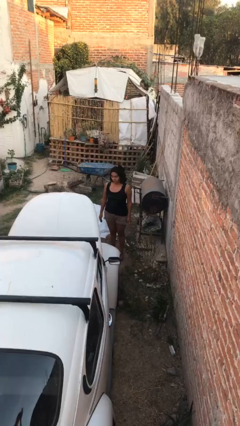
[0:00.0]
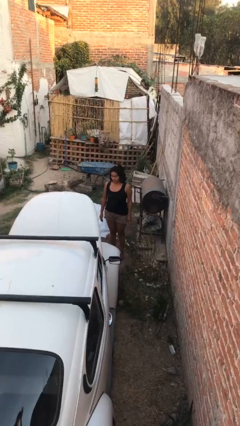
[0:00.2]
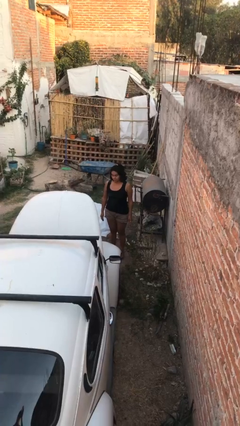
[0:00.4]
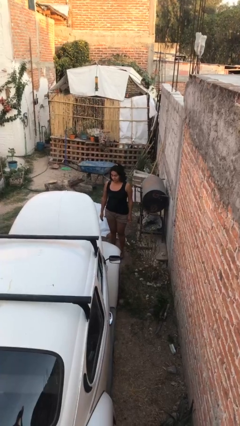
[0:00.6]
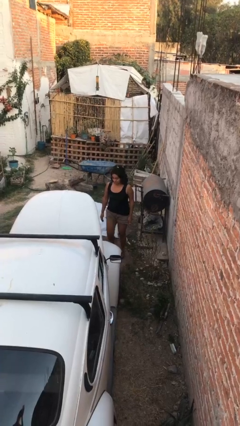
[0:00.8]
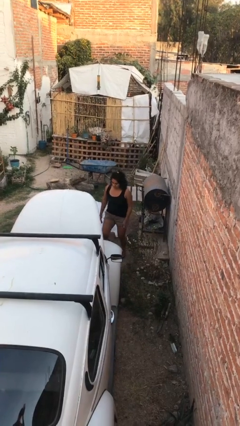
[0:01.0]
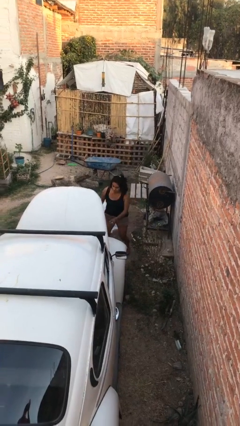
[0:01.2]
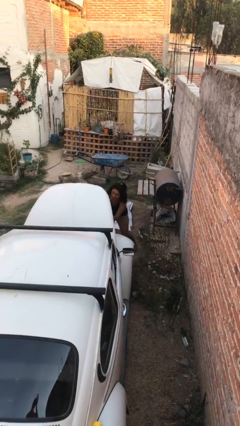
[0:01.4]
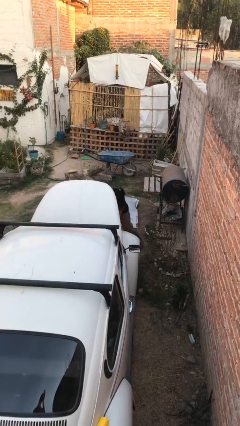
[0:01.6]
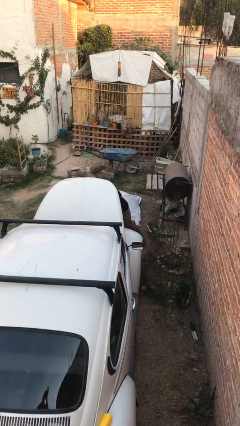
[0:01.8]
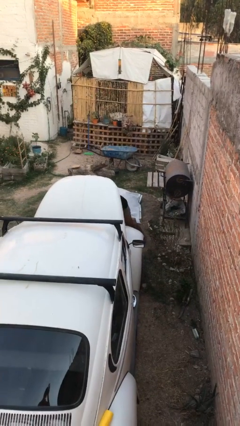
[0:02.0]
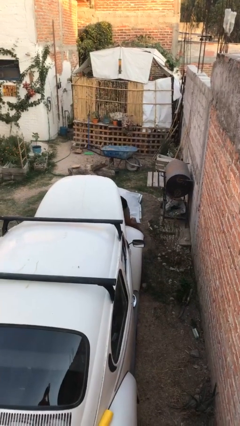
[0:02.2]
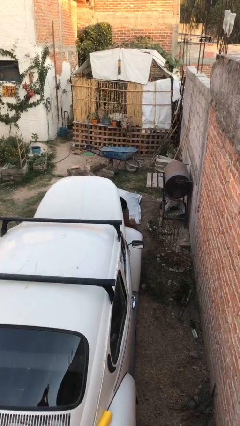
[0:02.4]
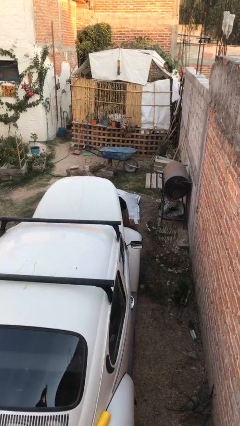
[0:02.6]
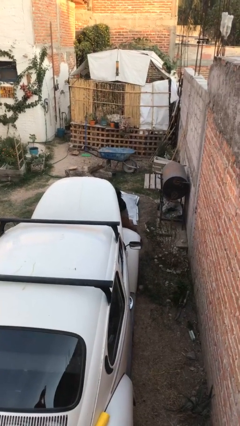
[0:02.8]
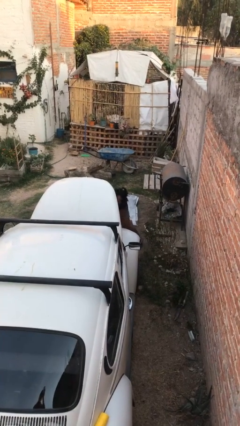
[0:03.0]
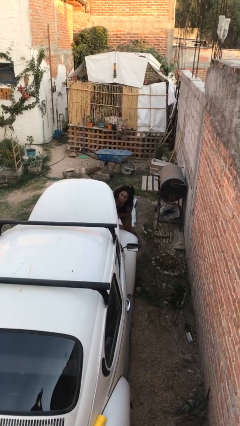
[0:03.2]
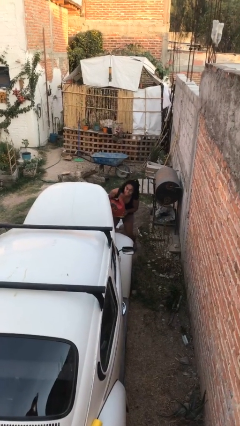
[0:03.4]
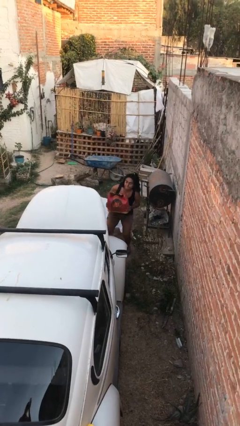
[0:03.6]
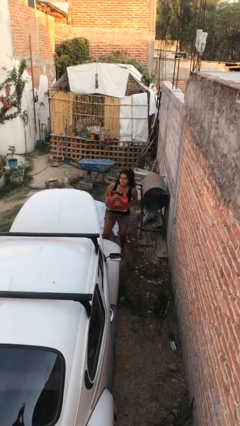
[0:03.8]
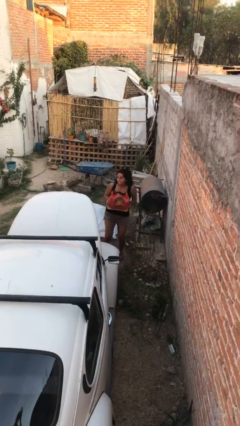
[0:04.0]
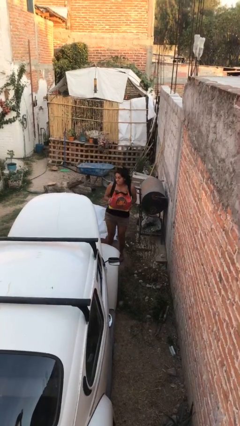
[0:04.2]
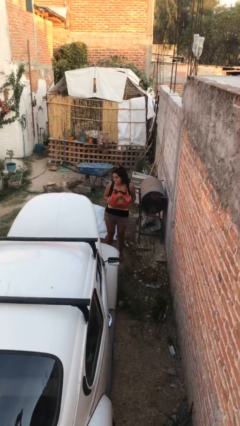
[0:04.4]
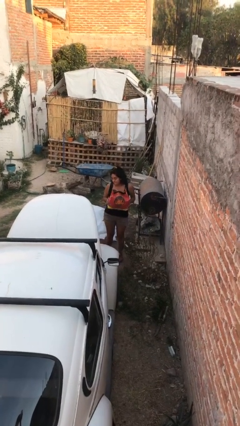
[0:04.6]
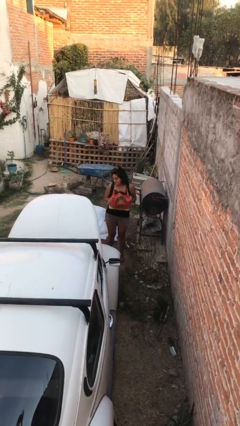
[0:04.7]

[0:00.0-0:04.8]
person unloads car

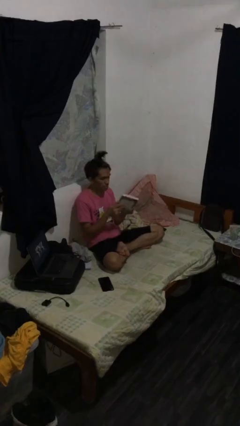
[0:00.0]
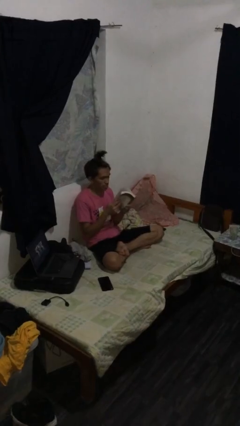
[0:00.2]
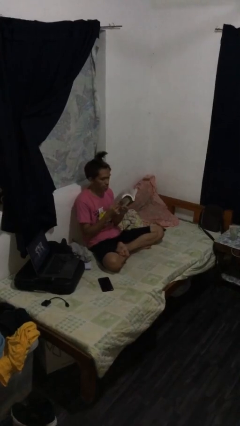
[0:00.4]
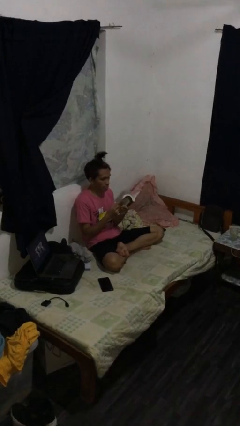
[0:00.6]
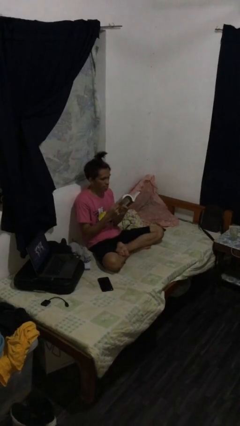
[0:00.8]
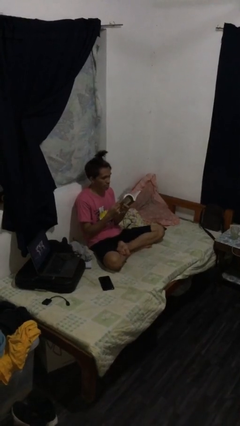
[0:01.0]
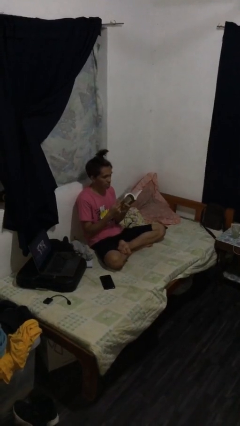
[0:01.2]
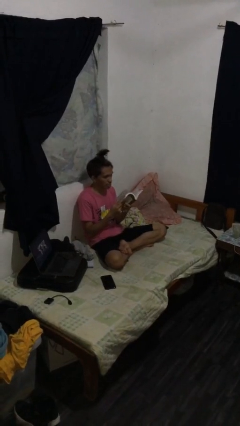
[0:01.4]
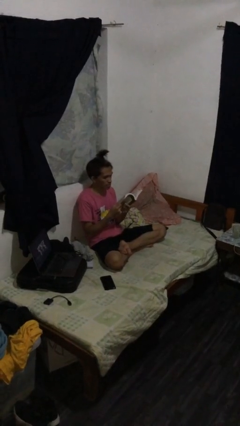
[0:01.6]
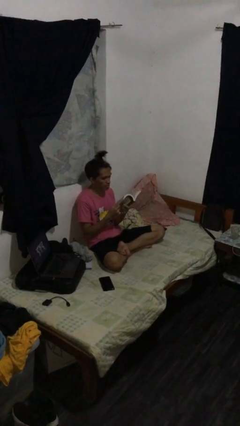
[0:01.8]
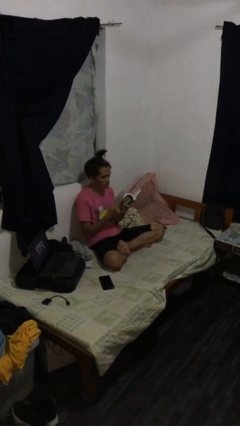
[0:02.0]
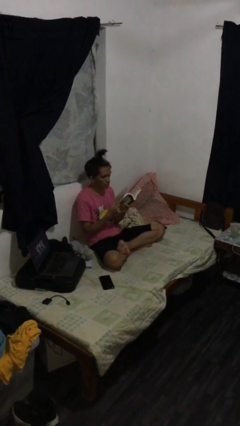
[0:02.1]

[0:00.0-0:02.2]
person reads document

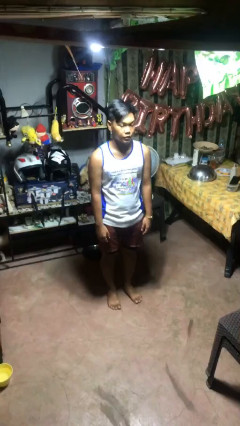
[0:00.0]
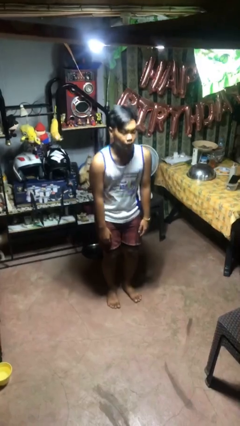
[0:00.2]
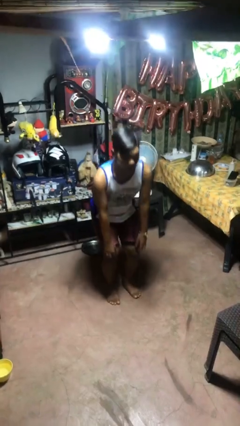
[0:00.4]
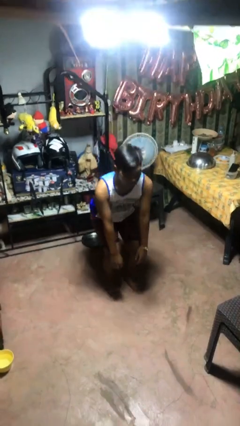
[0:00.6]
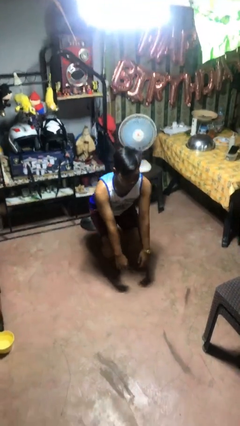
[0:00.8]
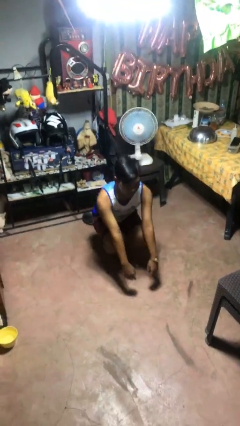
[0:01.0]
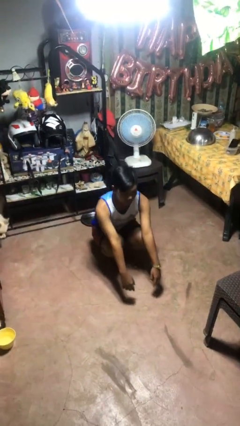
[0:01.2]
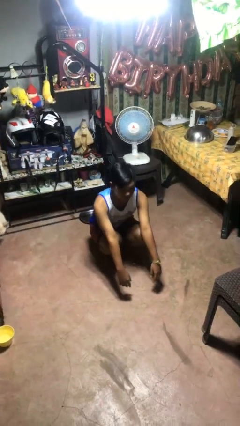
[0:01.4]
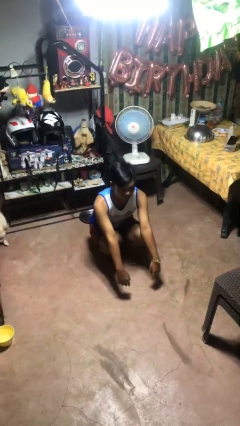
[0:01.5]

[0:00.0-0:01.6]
person squats

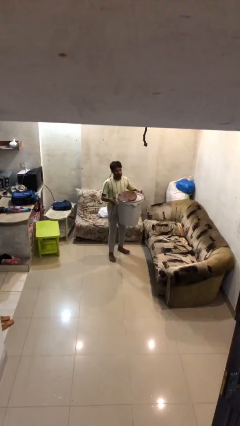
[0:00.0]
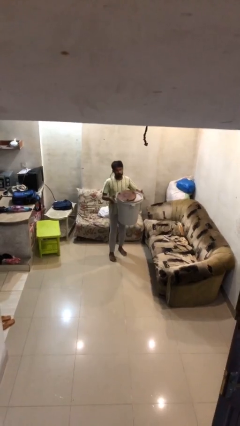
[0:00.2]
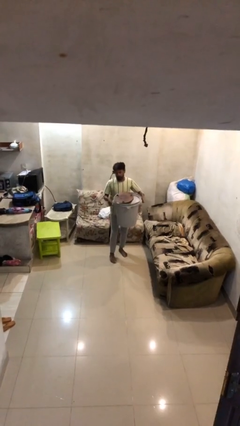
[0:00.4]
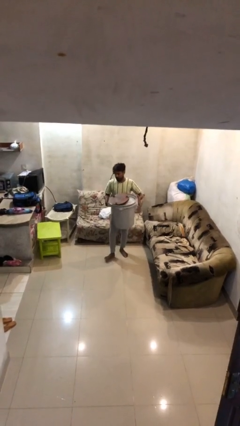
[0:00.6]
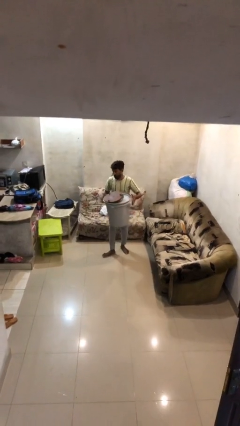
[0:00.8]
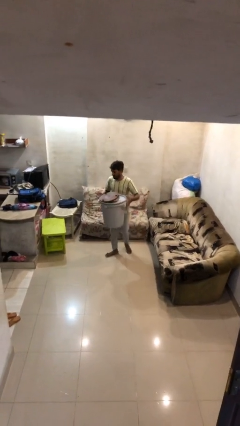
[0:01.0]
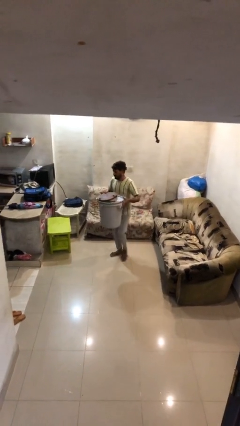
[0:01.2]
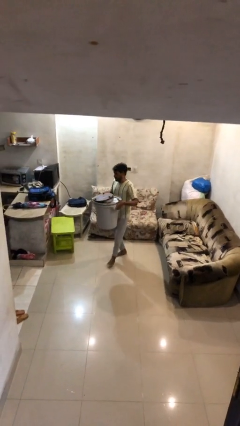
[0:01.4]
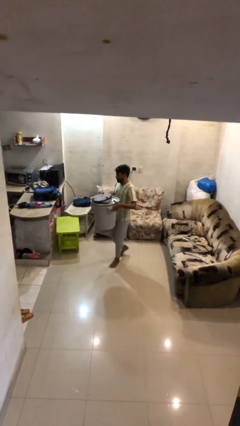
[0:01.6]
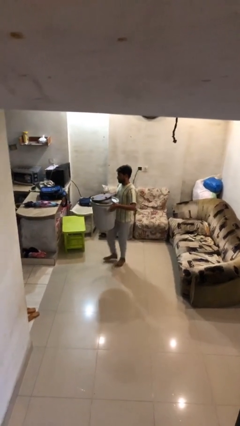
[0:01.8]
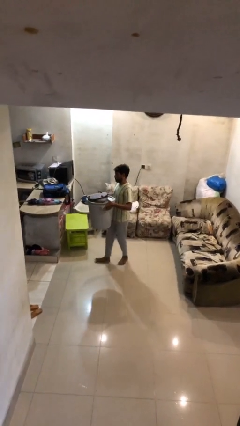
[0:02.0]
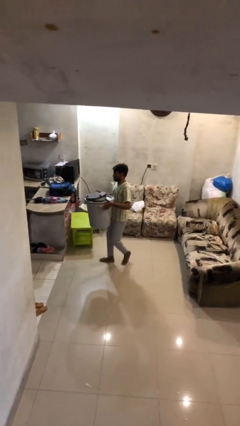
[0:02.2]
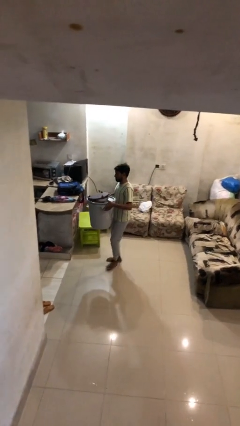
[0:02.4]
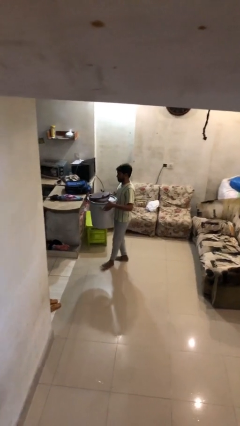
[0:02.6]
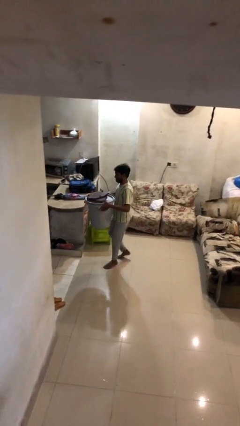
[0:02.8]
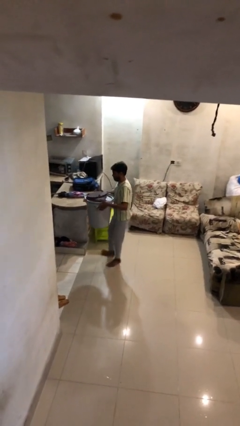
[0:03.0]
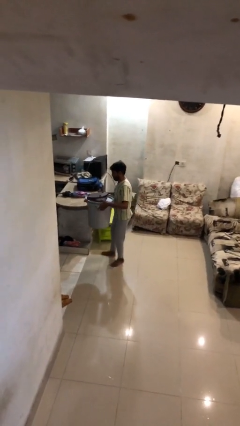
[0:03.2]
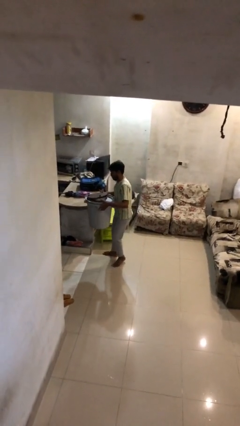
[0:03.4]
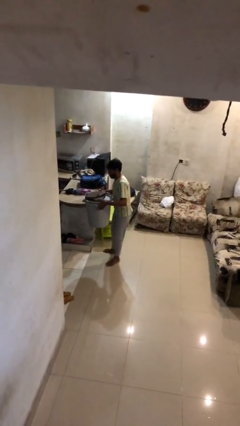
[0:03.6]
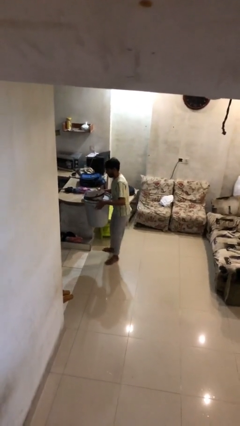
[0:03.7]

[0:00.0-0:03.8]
person carries heavy object

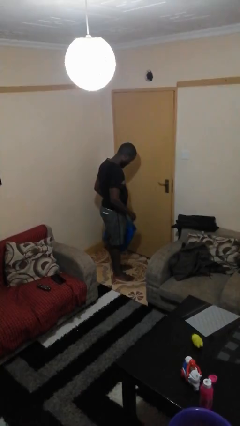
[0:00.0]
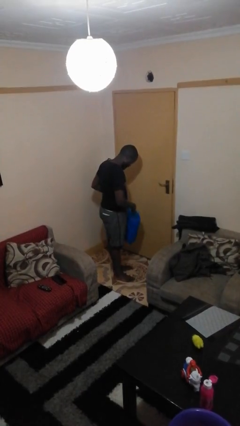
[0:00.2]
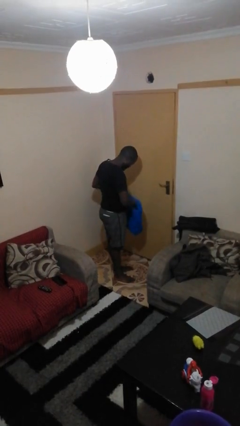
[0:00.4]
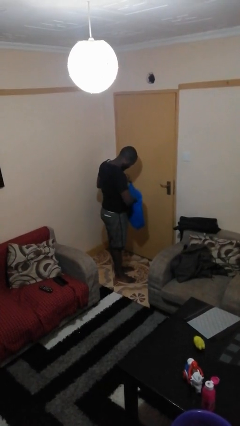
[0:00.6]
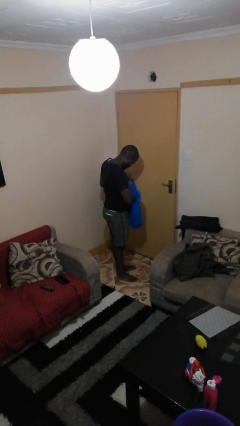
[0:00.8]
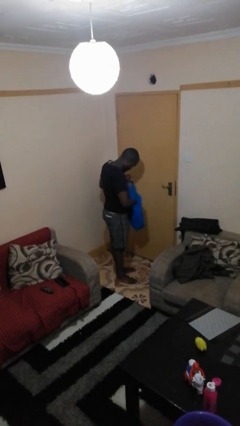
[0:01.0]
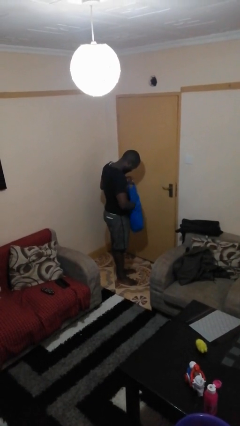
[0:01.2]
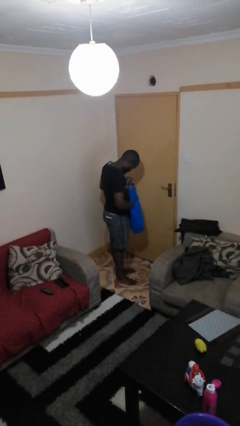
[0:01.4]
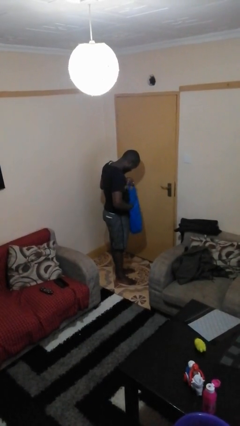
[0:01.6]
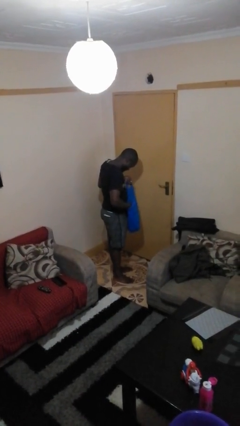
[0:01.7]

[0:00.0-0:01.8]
person searches in bag

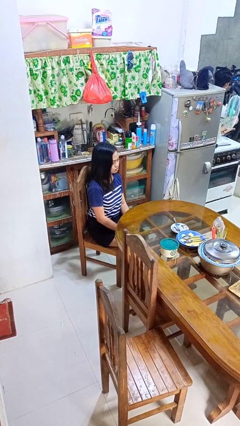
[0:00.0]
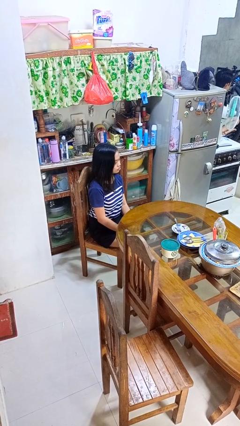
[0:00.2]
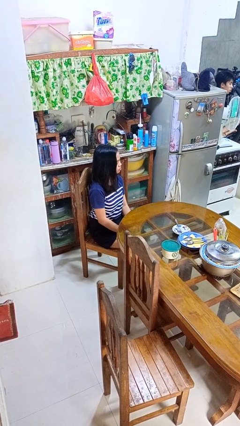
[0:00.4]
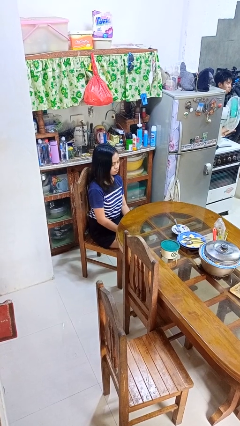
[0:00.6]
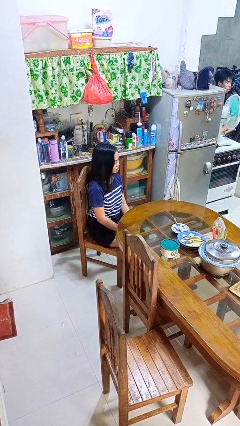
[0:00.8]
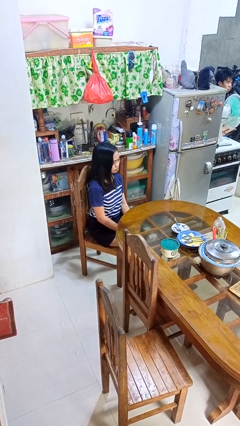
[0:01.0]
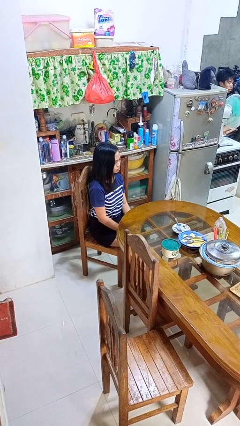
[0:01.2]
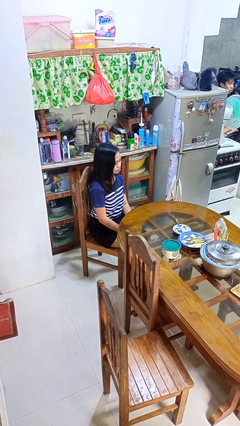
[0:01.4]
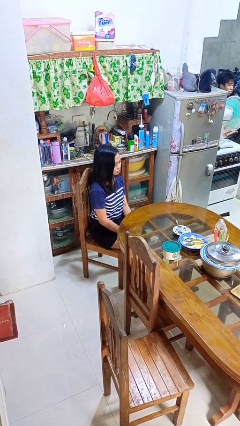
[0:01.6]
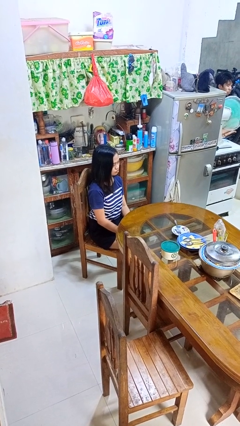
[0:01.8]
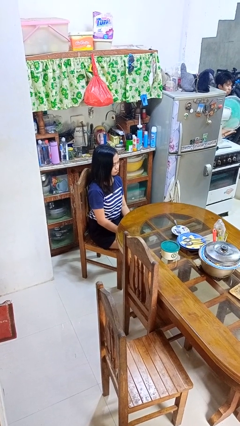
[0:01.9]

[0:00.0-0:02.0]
person shakes head

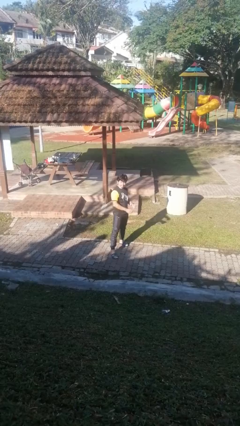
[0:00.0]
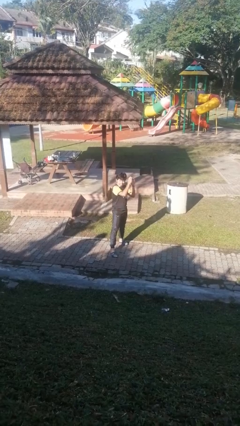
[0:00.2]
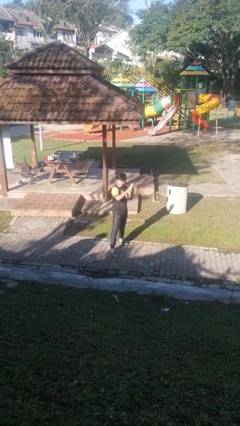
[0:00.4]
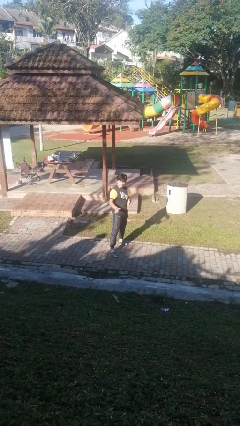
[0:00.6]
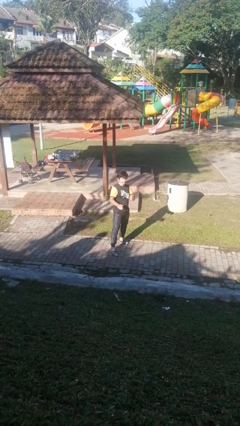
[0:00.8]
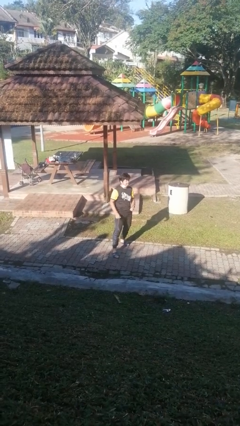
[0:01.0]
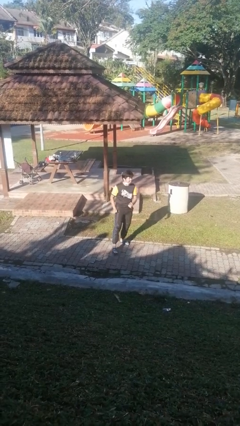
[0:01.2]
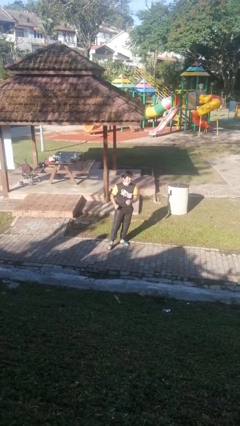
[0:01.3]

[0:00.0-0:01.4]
person karate chop
